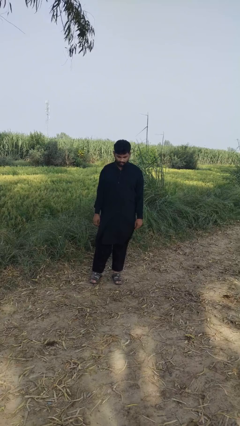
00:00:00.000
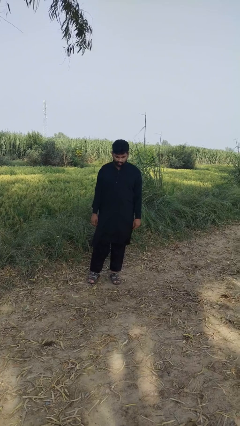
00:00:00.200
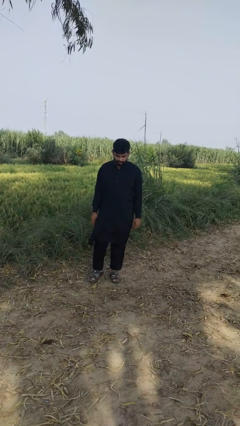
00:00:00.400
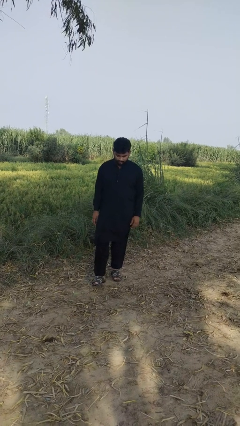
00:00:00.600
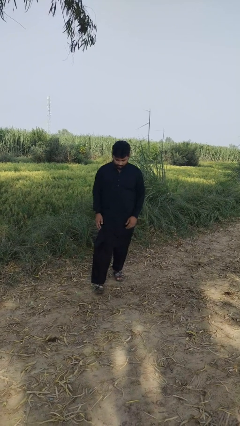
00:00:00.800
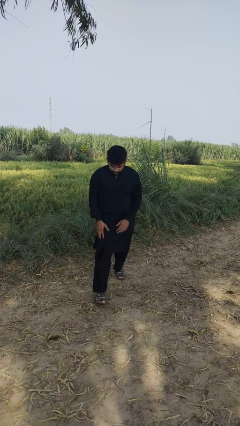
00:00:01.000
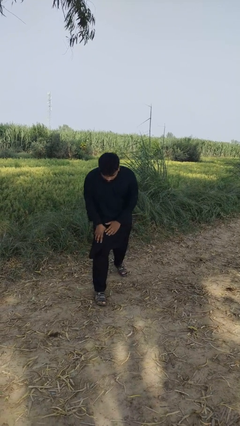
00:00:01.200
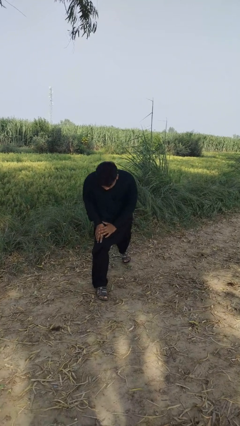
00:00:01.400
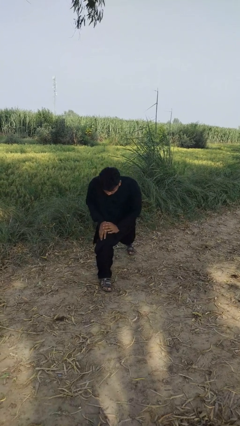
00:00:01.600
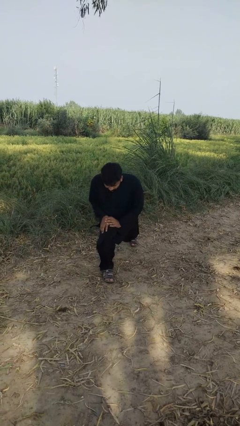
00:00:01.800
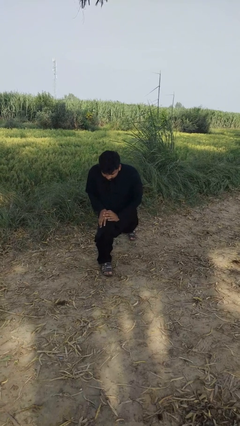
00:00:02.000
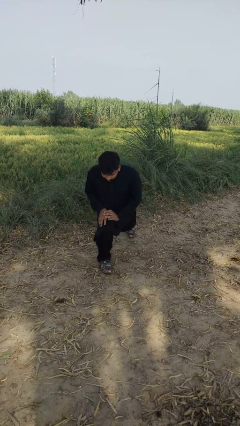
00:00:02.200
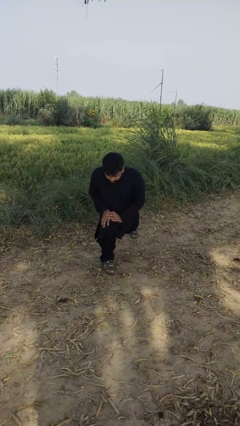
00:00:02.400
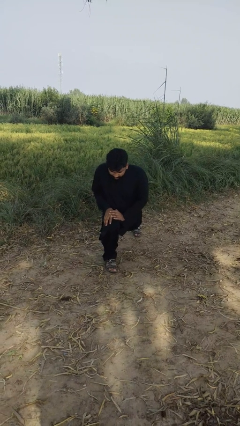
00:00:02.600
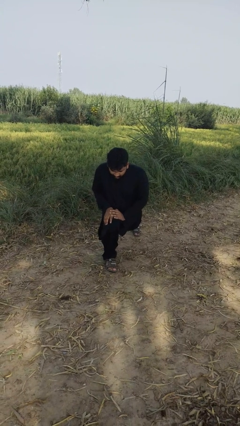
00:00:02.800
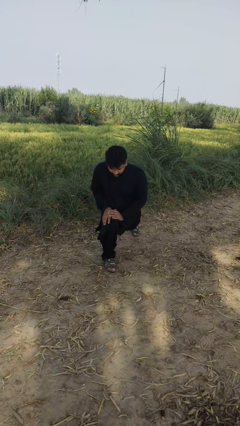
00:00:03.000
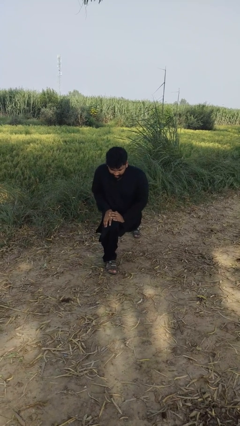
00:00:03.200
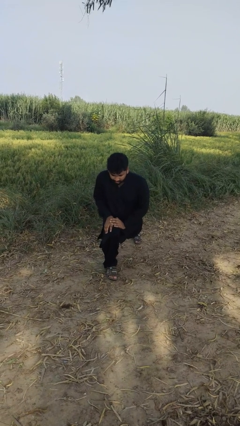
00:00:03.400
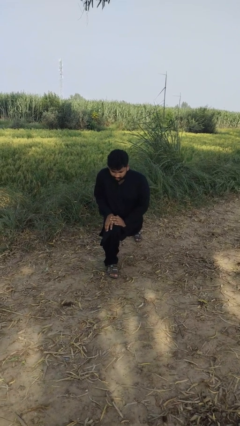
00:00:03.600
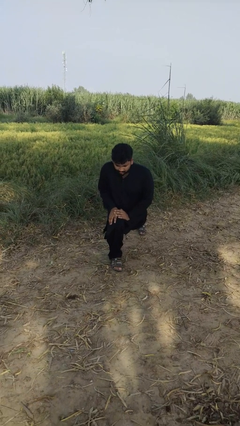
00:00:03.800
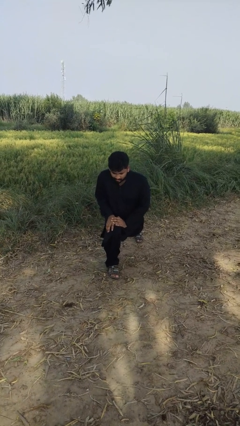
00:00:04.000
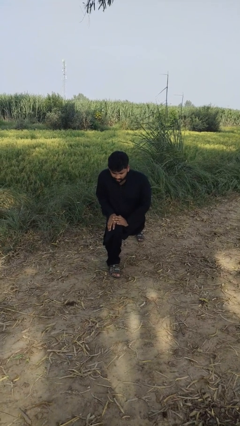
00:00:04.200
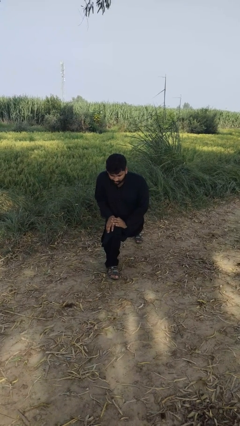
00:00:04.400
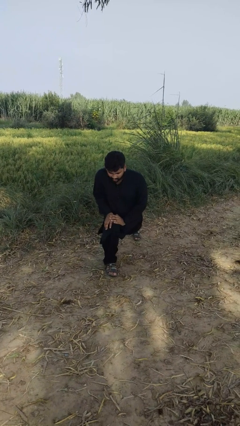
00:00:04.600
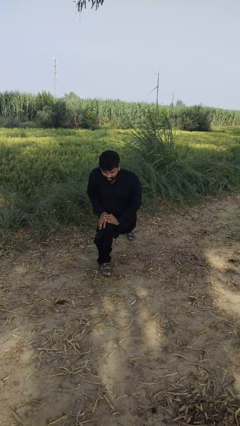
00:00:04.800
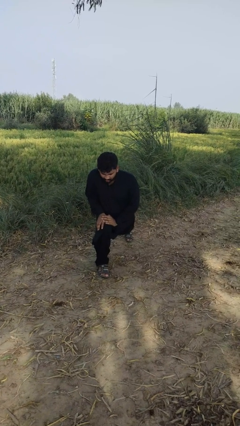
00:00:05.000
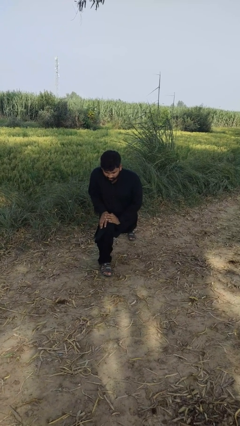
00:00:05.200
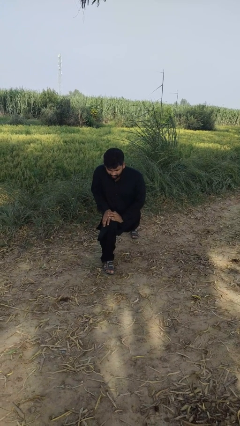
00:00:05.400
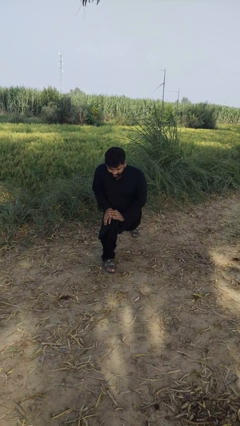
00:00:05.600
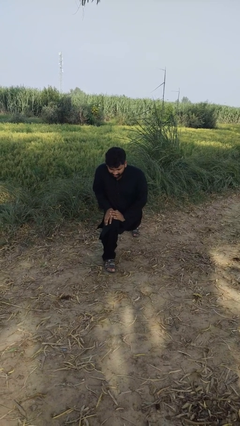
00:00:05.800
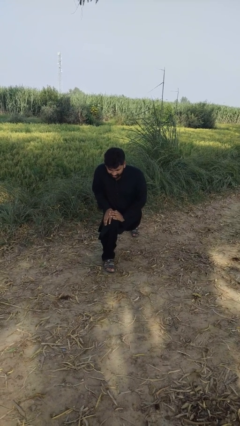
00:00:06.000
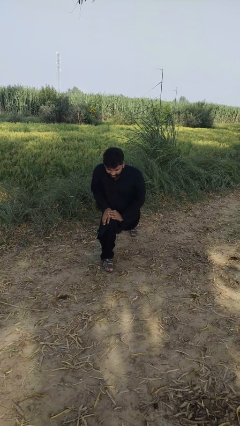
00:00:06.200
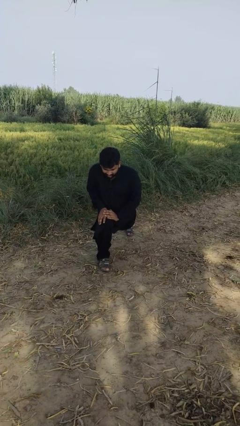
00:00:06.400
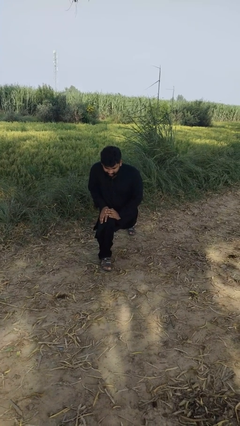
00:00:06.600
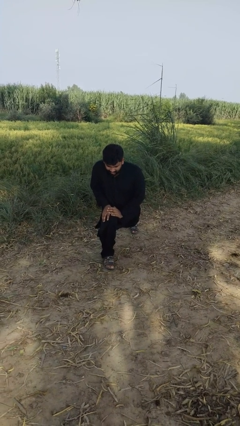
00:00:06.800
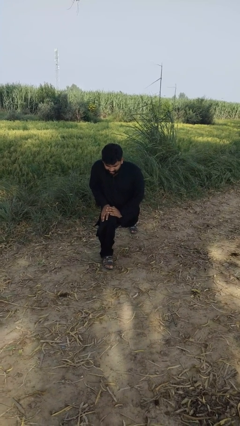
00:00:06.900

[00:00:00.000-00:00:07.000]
person exercises with lunges

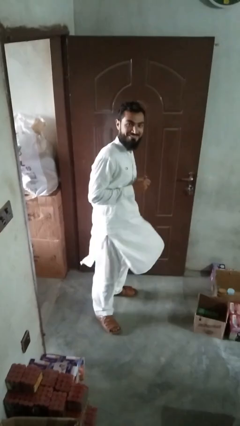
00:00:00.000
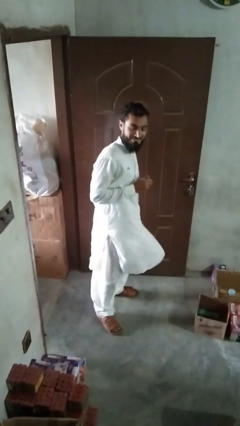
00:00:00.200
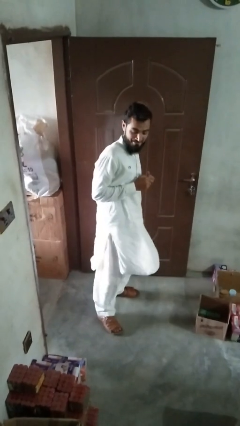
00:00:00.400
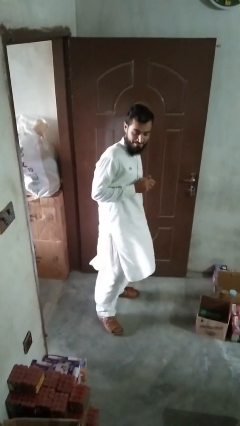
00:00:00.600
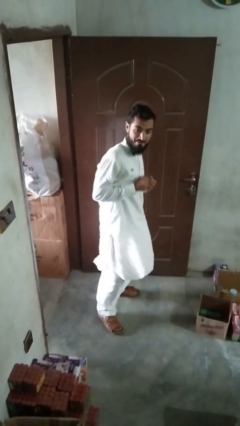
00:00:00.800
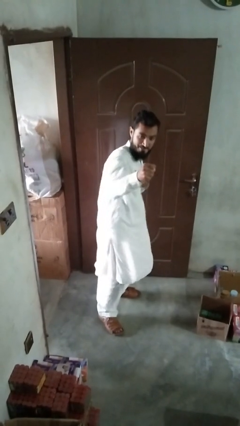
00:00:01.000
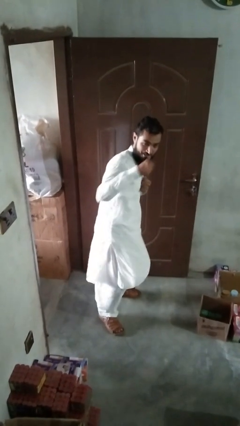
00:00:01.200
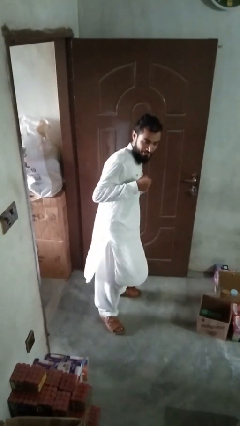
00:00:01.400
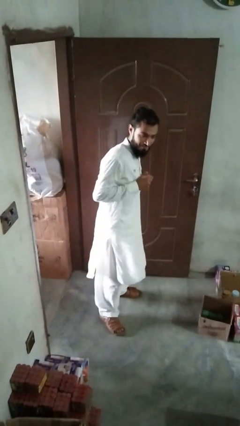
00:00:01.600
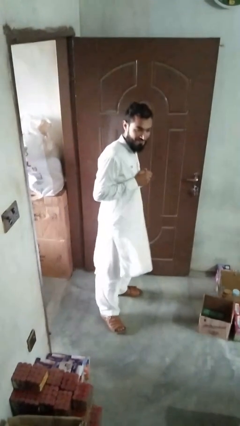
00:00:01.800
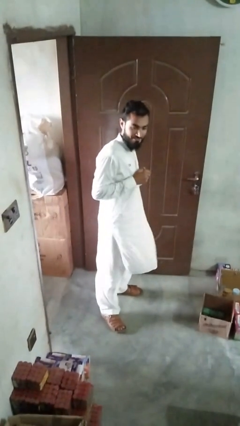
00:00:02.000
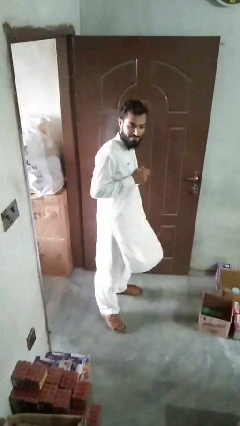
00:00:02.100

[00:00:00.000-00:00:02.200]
person karate chop

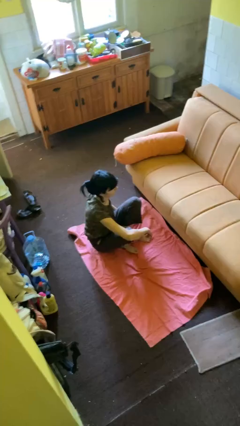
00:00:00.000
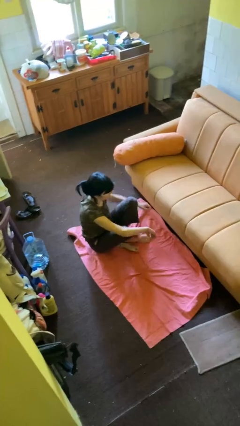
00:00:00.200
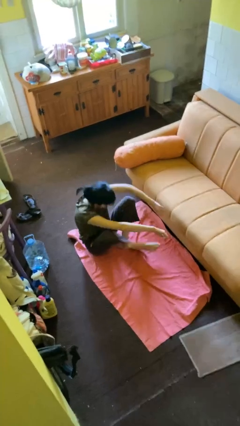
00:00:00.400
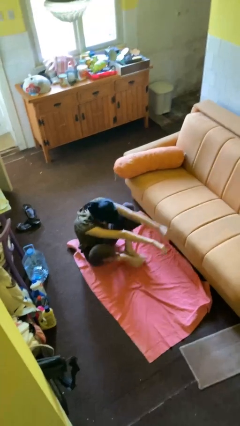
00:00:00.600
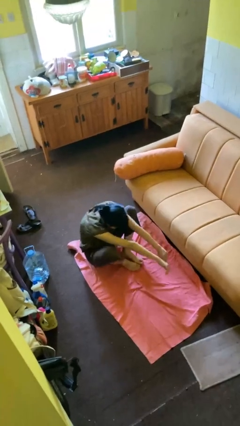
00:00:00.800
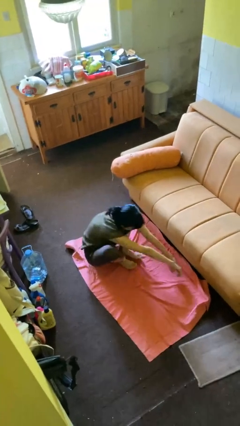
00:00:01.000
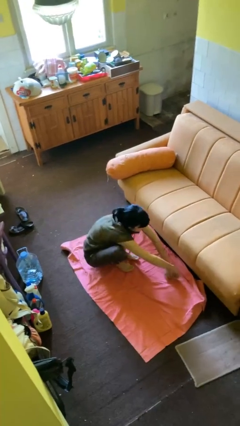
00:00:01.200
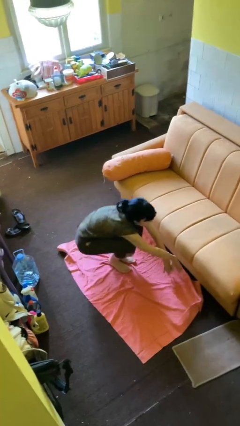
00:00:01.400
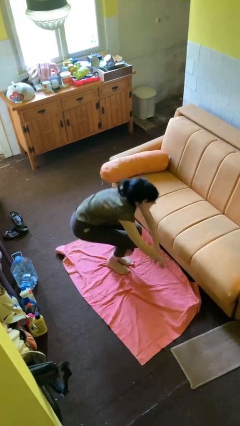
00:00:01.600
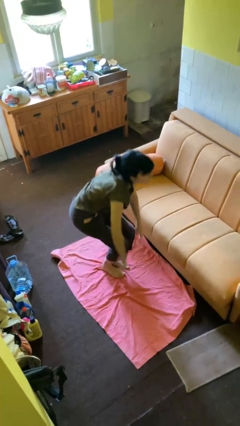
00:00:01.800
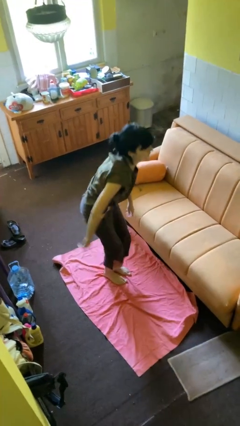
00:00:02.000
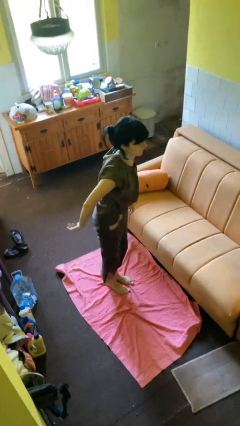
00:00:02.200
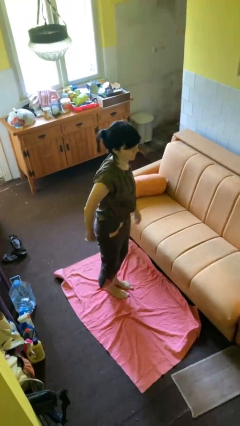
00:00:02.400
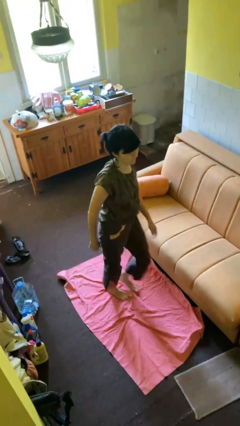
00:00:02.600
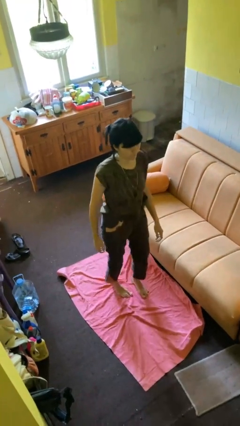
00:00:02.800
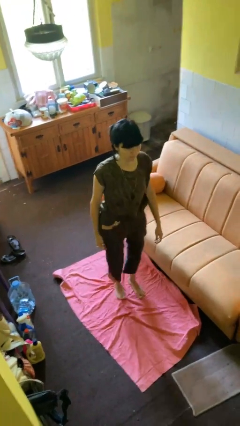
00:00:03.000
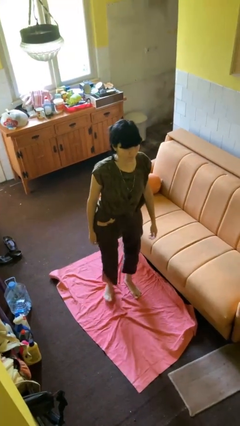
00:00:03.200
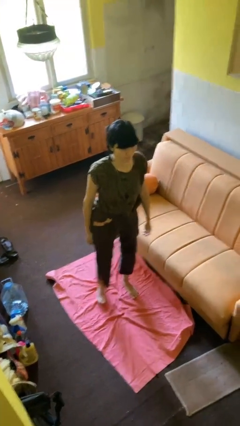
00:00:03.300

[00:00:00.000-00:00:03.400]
person stands up from floor

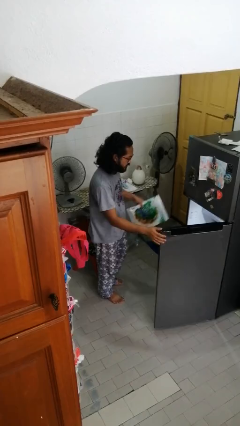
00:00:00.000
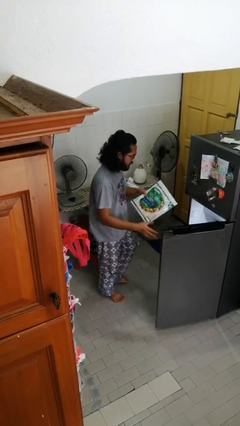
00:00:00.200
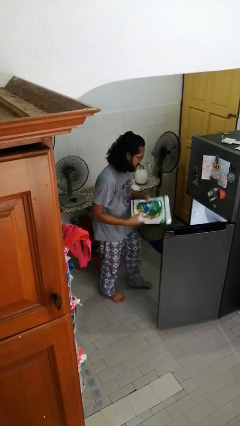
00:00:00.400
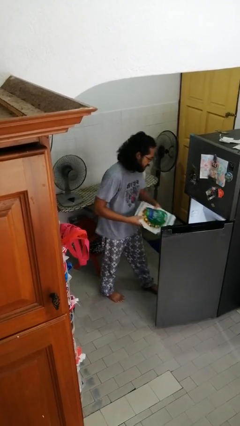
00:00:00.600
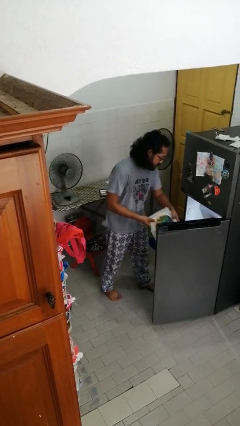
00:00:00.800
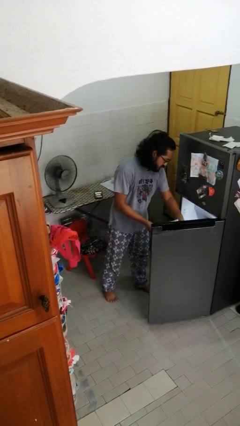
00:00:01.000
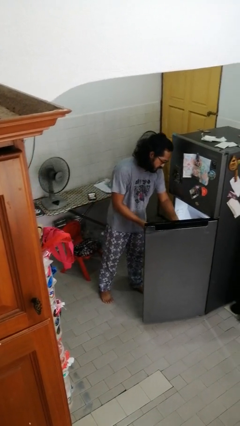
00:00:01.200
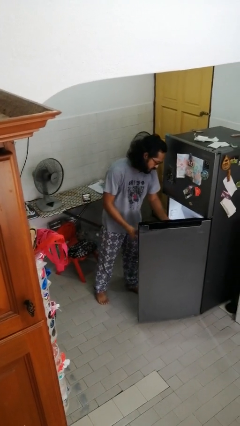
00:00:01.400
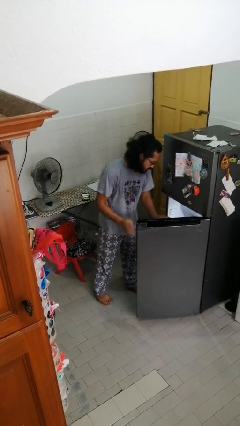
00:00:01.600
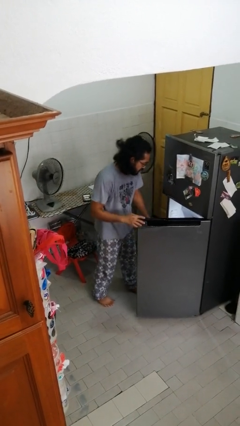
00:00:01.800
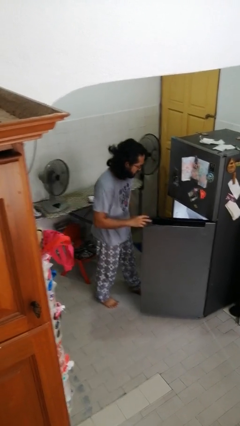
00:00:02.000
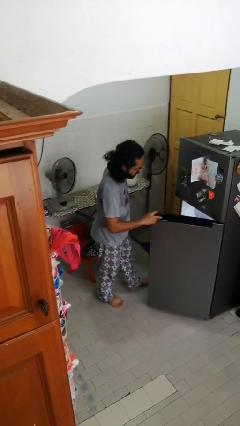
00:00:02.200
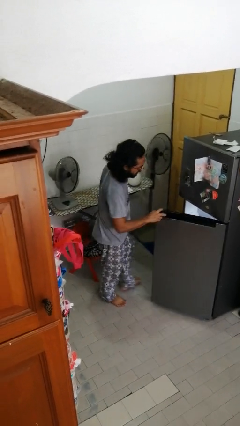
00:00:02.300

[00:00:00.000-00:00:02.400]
person puts object into refrigerator

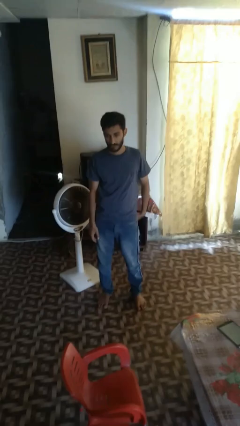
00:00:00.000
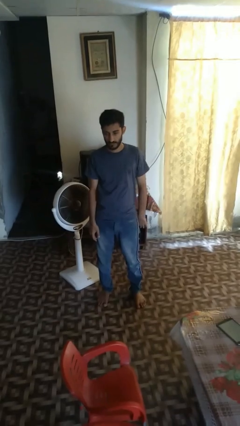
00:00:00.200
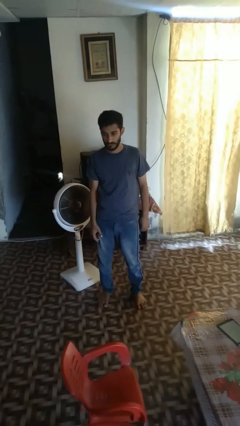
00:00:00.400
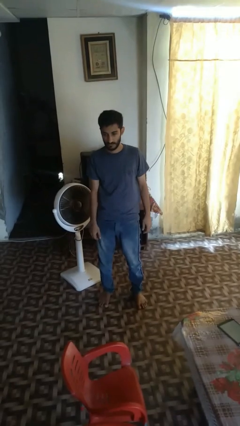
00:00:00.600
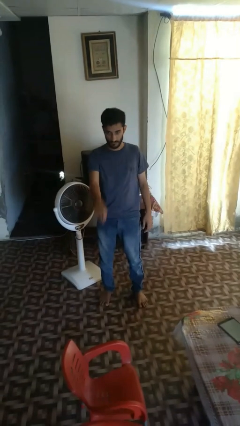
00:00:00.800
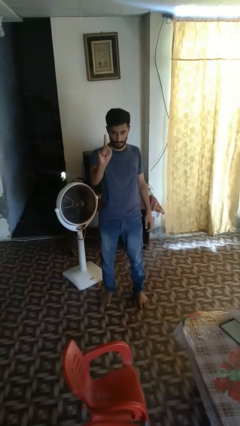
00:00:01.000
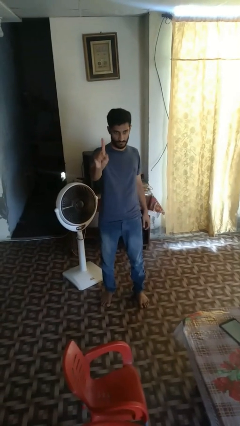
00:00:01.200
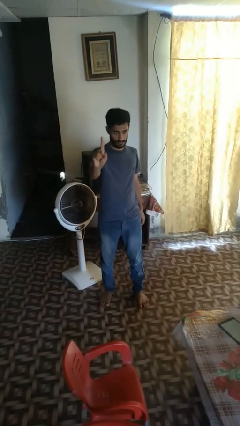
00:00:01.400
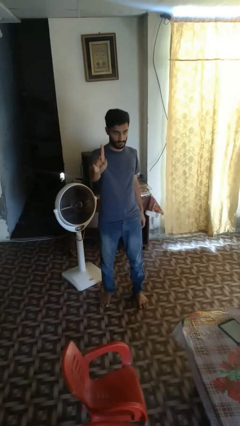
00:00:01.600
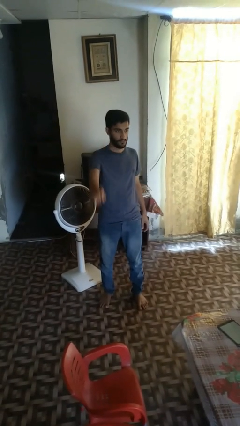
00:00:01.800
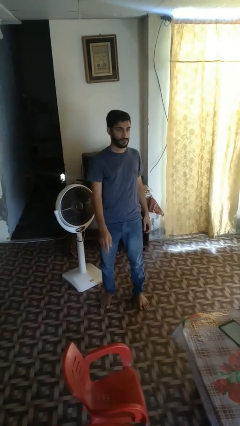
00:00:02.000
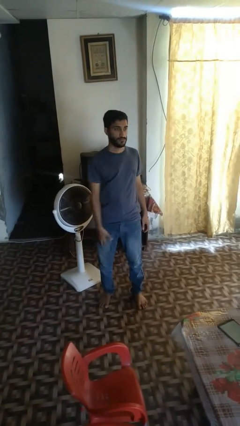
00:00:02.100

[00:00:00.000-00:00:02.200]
person gestures number one

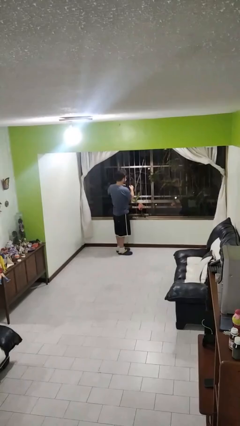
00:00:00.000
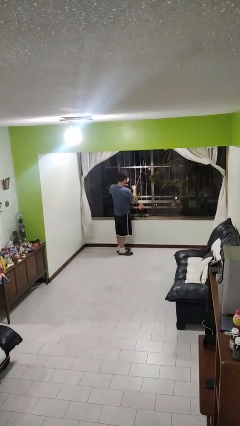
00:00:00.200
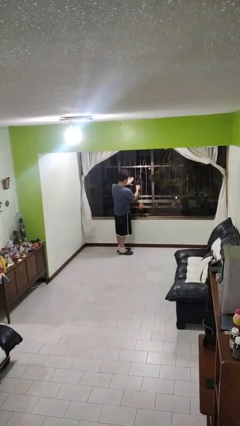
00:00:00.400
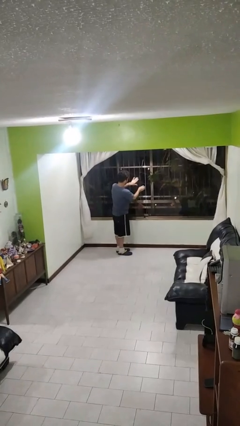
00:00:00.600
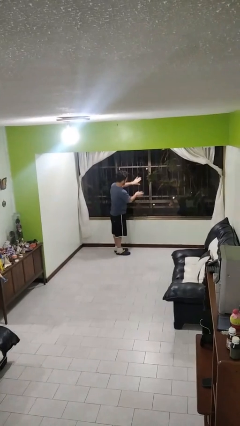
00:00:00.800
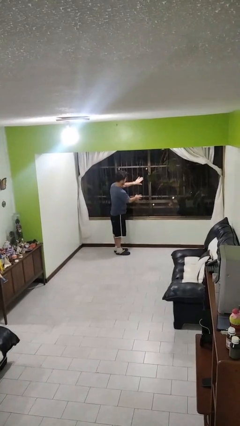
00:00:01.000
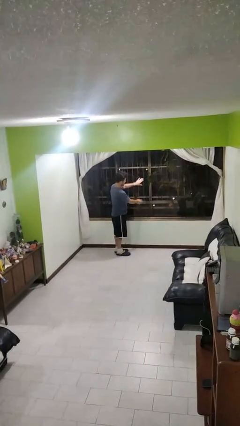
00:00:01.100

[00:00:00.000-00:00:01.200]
person closes home window
